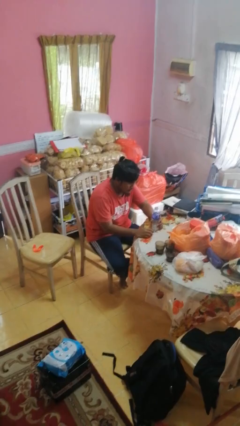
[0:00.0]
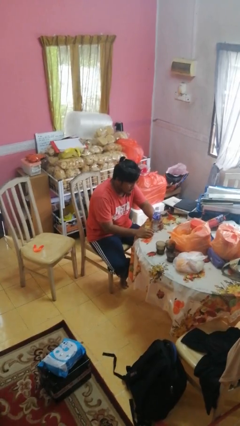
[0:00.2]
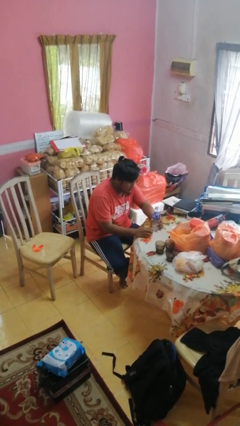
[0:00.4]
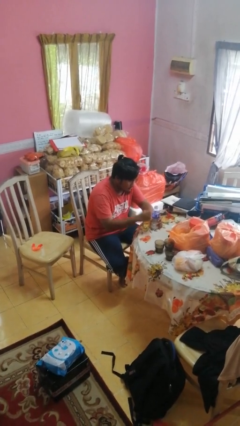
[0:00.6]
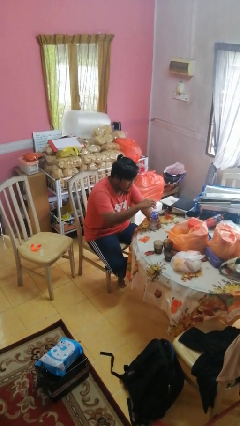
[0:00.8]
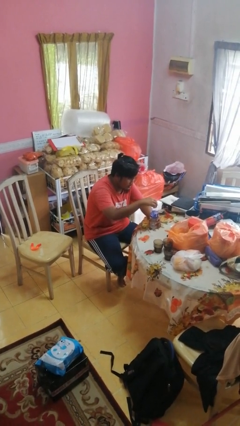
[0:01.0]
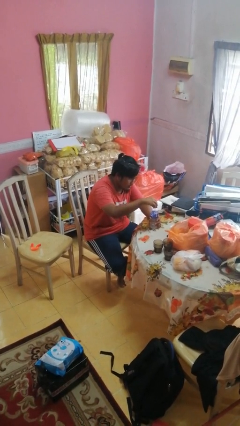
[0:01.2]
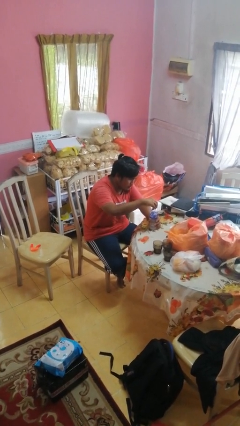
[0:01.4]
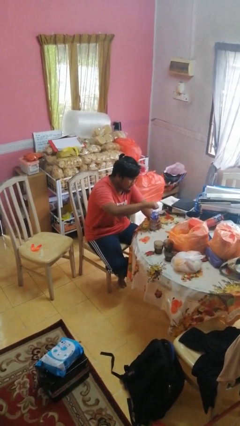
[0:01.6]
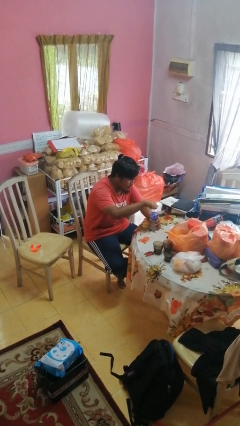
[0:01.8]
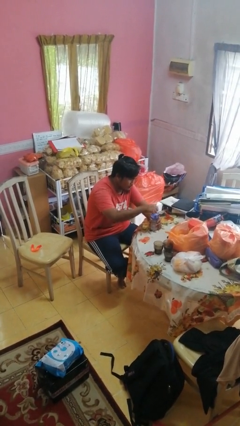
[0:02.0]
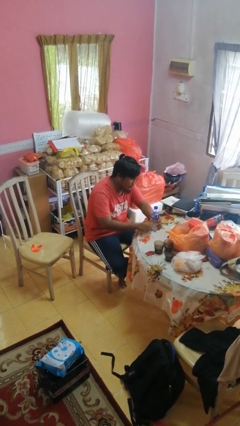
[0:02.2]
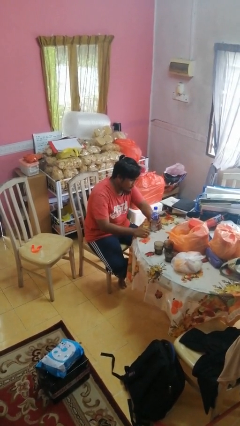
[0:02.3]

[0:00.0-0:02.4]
person screws lid to bottle

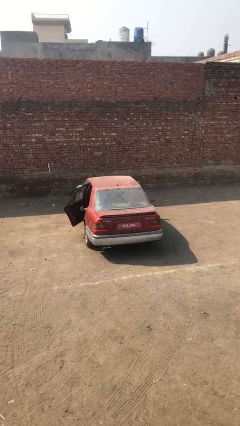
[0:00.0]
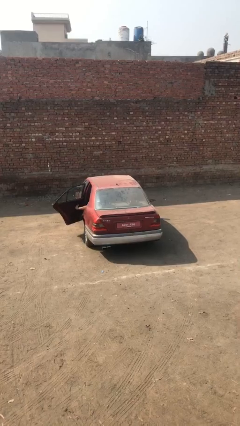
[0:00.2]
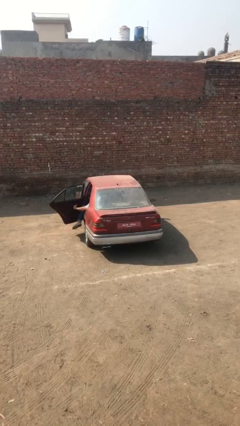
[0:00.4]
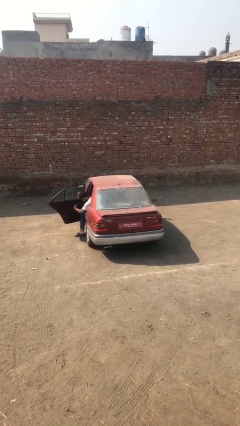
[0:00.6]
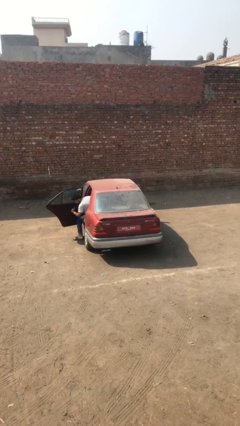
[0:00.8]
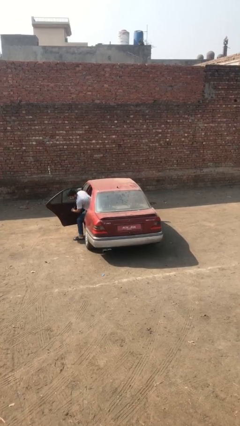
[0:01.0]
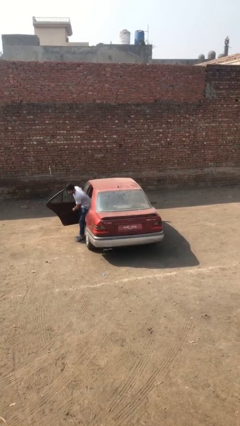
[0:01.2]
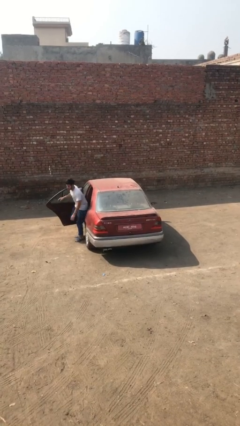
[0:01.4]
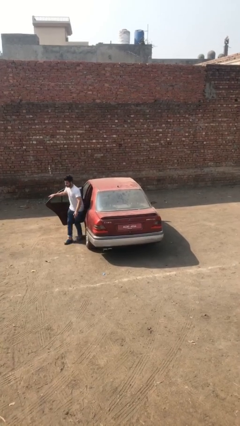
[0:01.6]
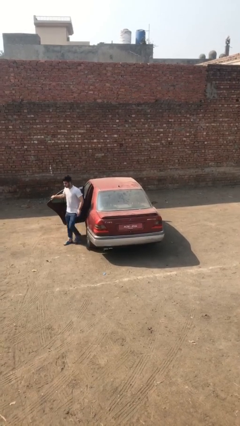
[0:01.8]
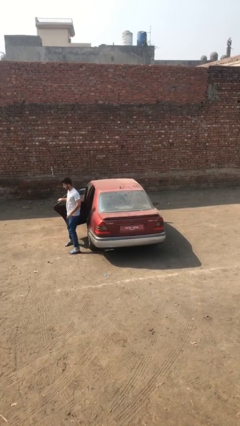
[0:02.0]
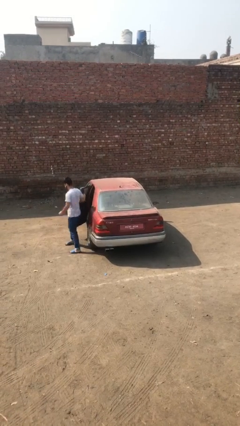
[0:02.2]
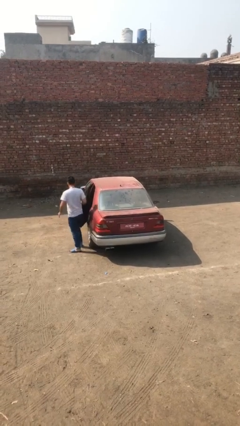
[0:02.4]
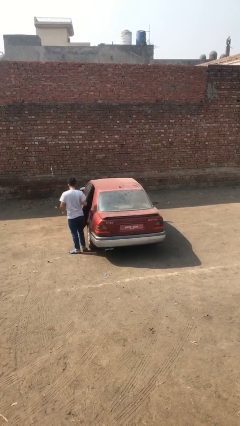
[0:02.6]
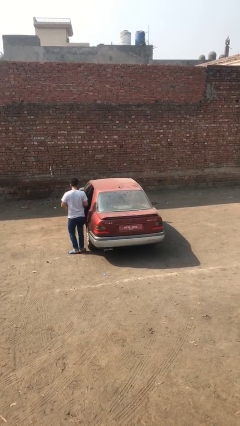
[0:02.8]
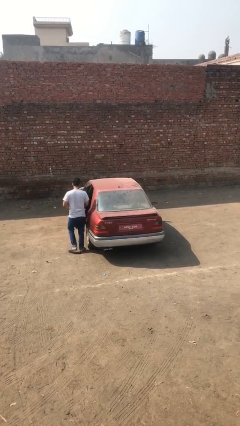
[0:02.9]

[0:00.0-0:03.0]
car drops off person

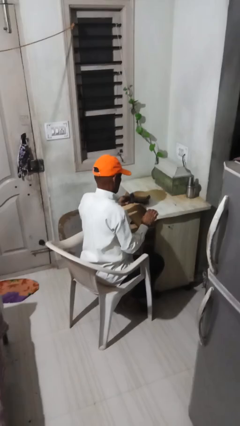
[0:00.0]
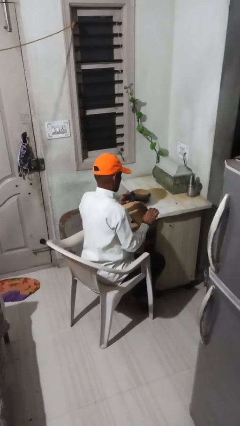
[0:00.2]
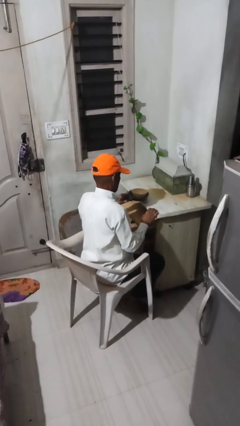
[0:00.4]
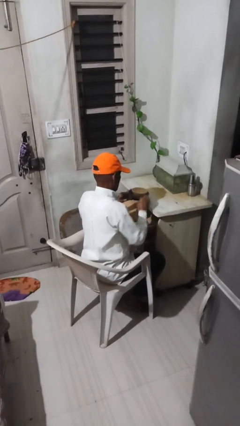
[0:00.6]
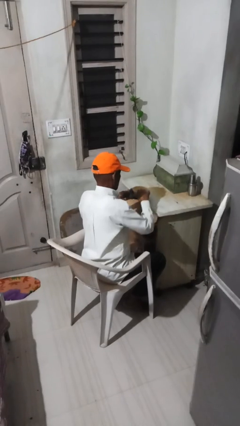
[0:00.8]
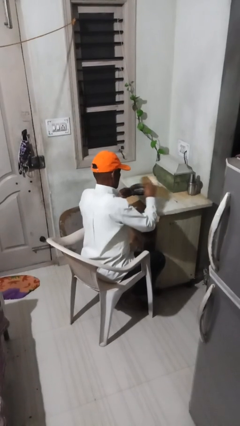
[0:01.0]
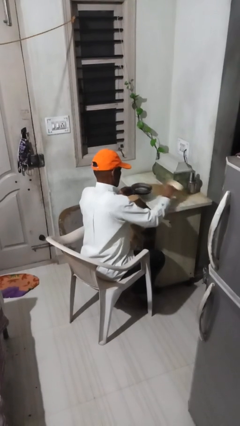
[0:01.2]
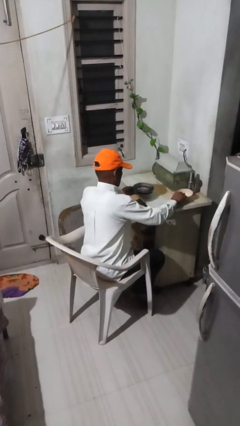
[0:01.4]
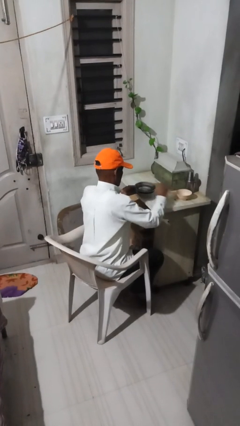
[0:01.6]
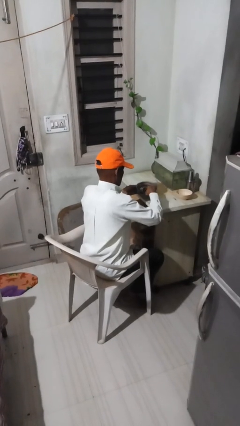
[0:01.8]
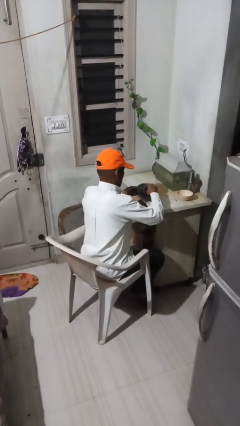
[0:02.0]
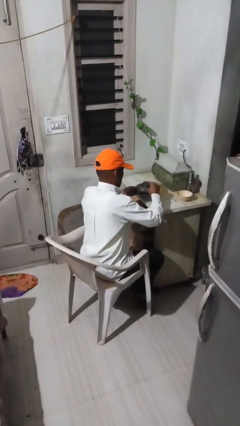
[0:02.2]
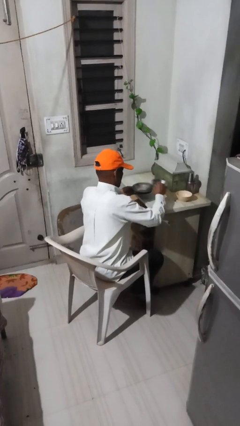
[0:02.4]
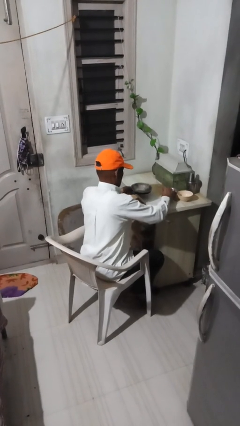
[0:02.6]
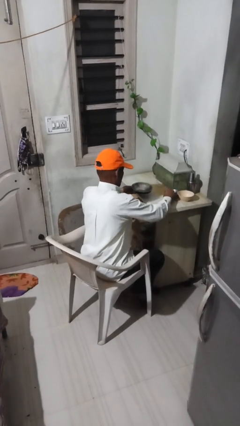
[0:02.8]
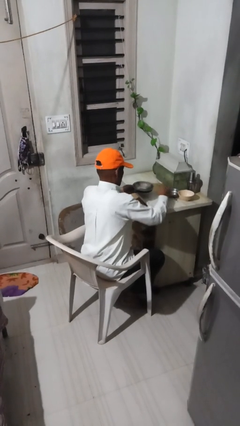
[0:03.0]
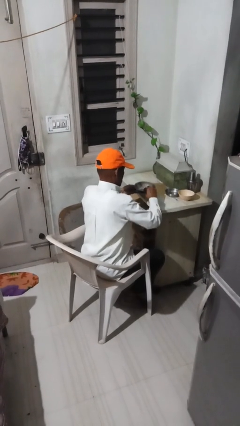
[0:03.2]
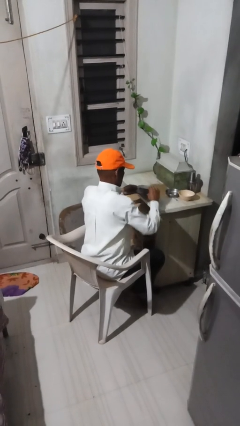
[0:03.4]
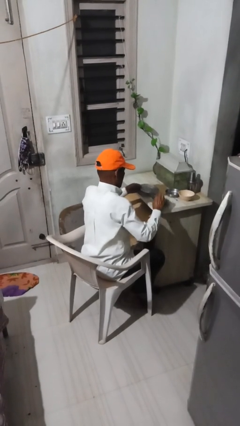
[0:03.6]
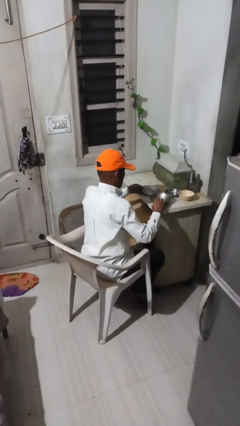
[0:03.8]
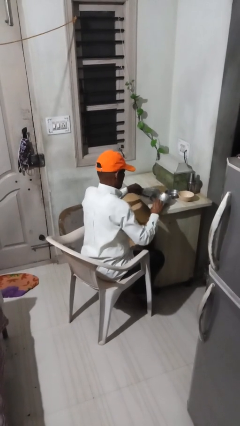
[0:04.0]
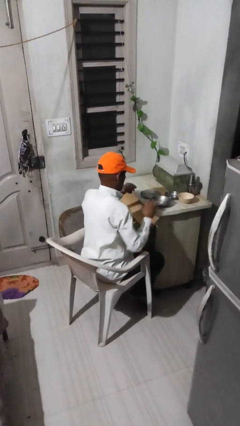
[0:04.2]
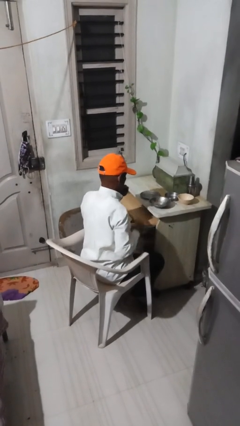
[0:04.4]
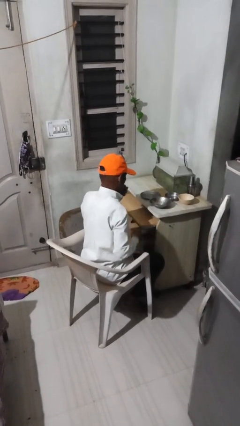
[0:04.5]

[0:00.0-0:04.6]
person sets table

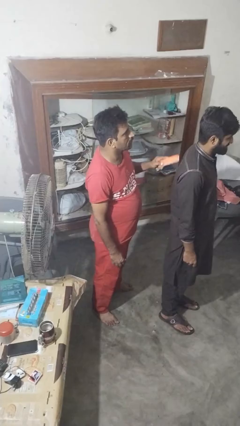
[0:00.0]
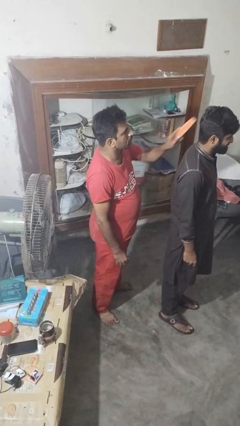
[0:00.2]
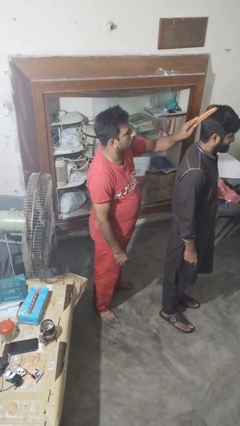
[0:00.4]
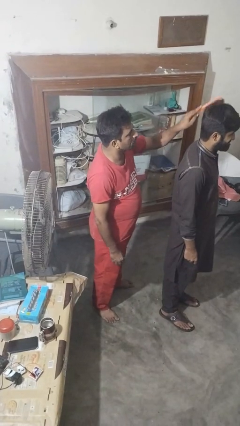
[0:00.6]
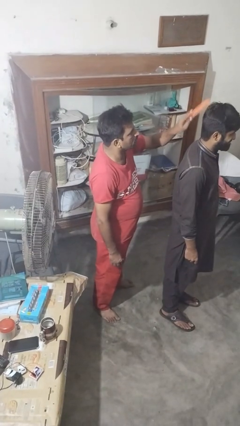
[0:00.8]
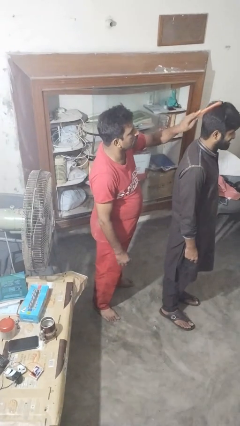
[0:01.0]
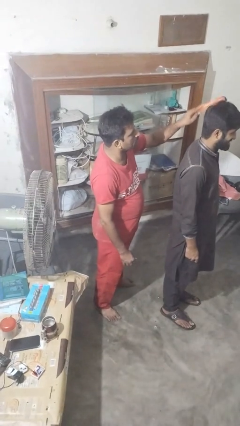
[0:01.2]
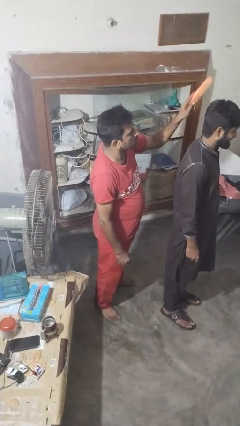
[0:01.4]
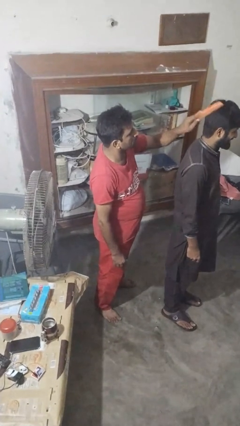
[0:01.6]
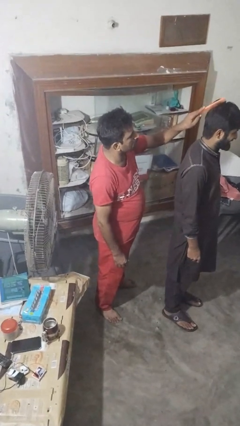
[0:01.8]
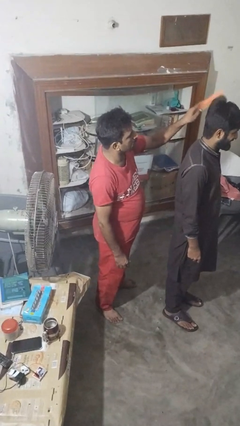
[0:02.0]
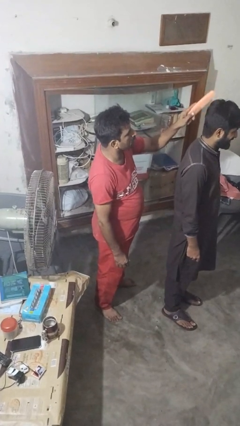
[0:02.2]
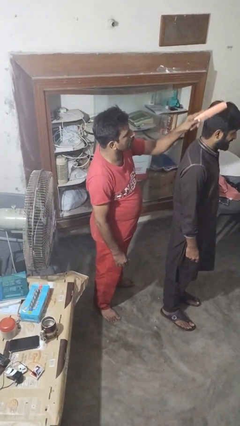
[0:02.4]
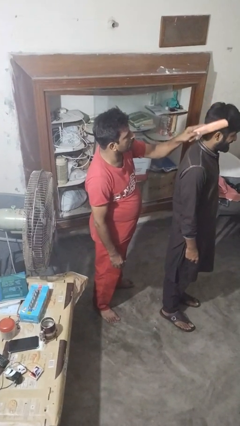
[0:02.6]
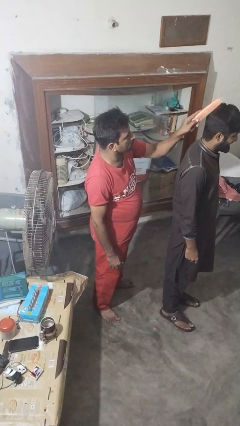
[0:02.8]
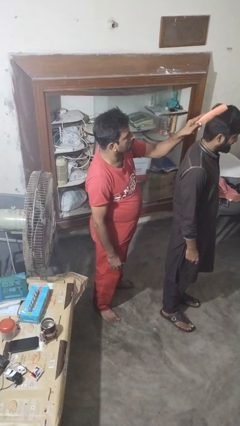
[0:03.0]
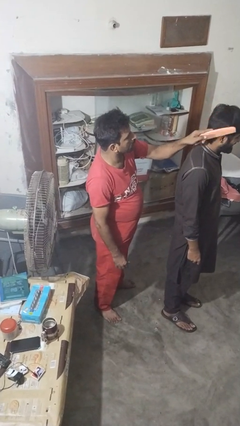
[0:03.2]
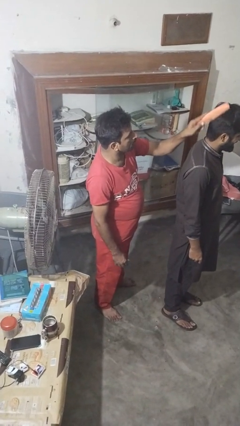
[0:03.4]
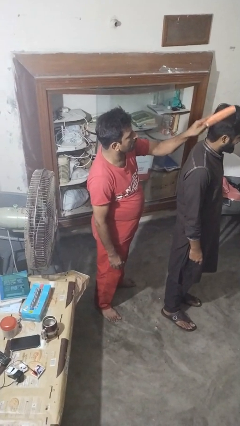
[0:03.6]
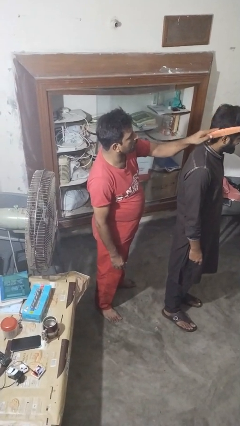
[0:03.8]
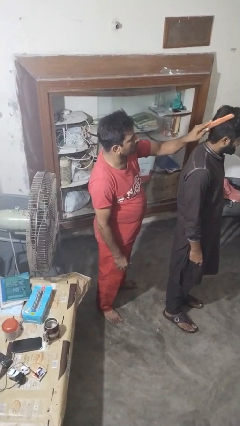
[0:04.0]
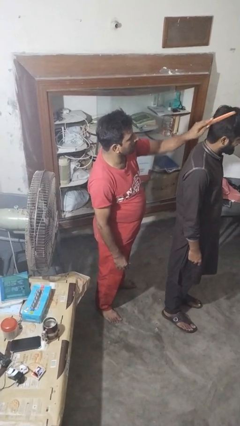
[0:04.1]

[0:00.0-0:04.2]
person brushes hair of person

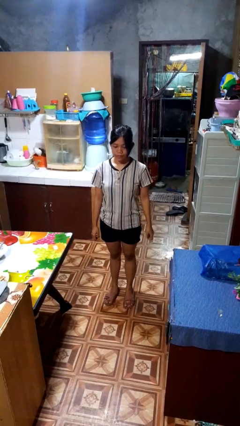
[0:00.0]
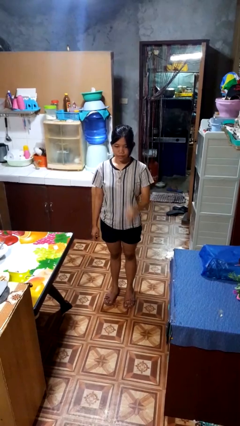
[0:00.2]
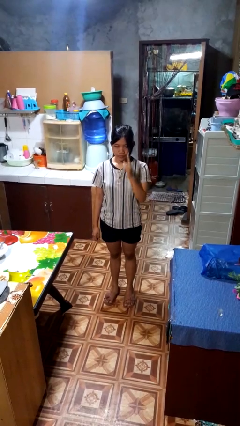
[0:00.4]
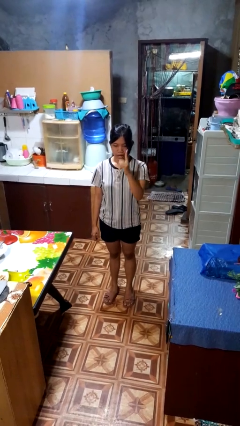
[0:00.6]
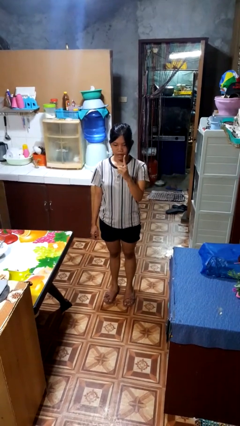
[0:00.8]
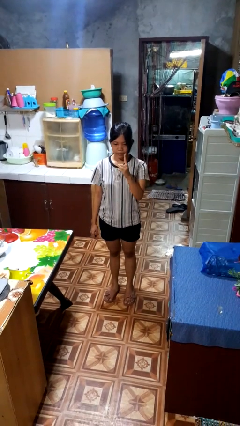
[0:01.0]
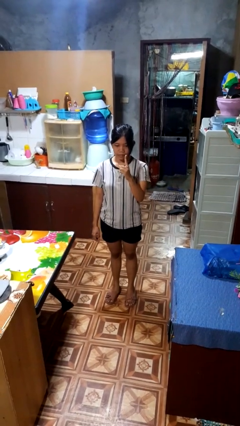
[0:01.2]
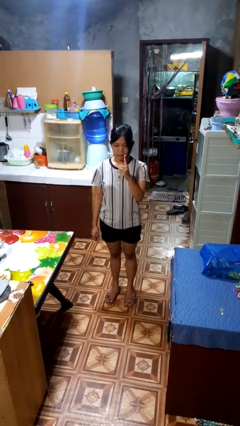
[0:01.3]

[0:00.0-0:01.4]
person gestures number one

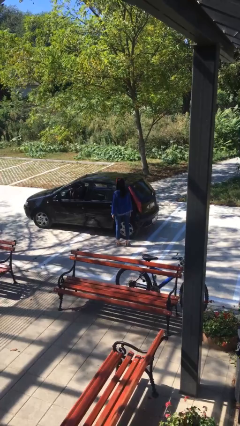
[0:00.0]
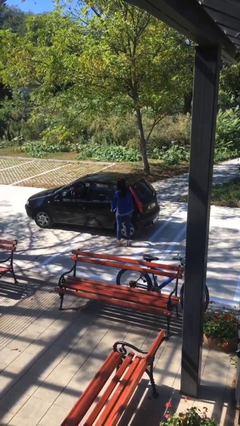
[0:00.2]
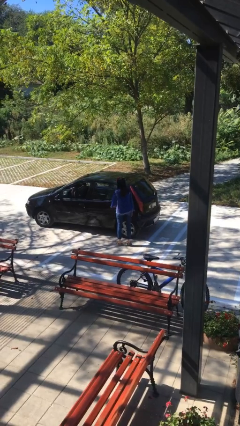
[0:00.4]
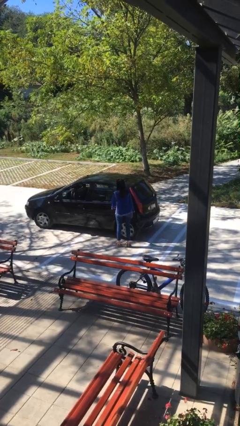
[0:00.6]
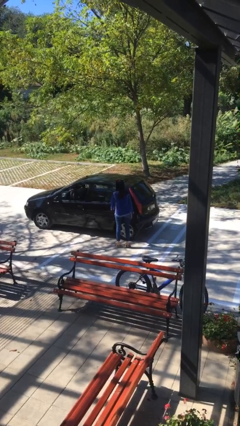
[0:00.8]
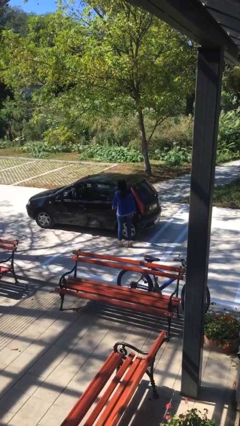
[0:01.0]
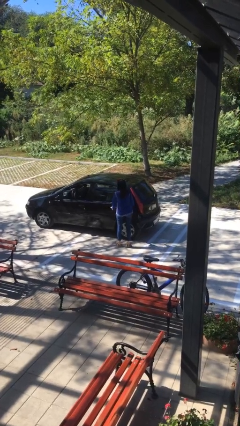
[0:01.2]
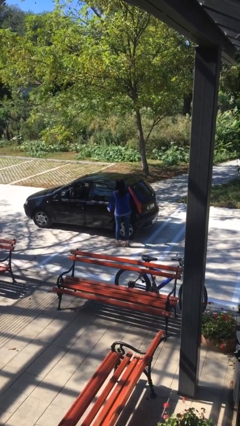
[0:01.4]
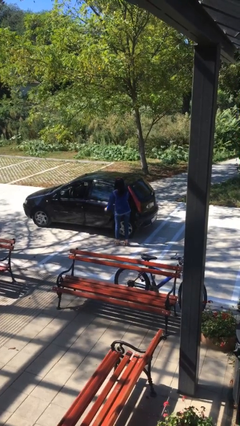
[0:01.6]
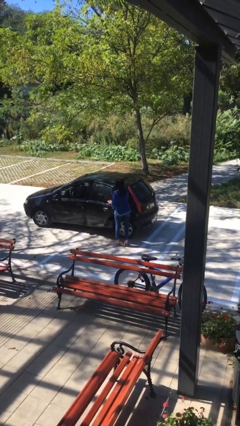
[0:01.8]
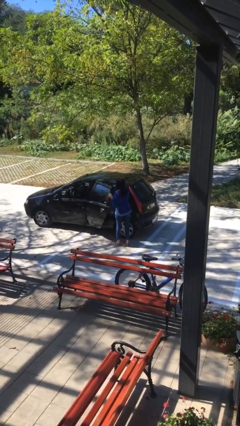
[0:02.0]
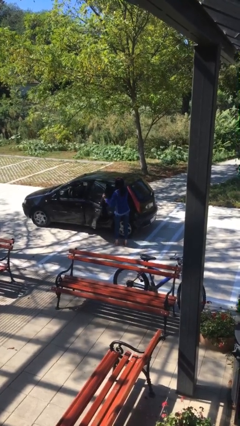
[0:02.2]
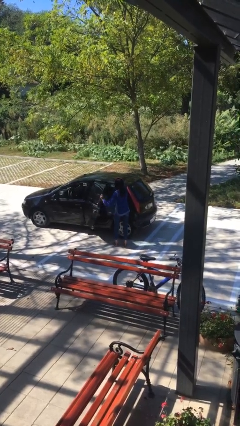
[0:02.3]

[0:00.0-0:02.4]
person opens car door
